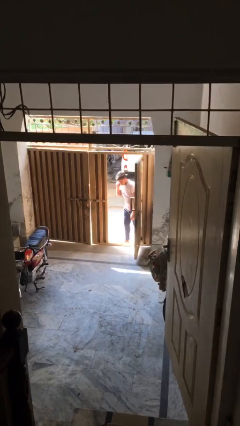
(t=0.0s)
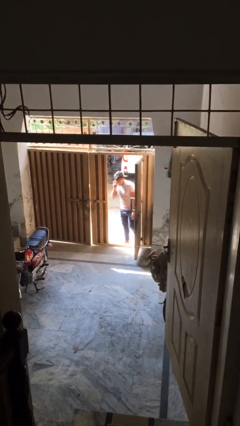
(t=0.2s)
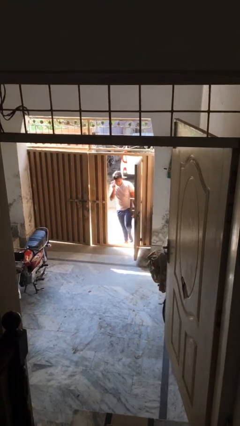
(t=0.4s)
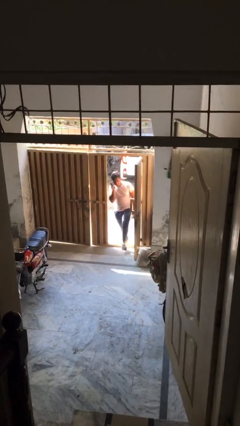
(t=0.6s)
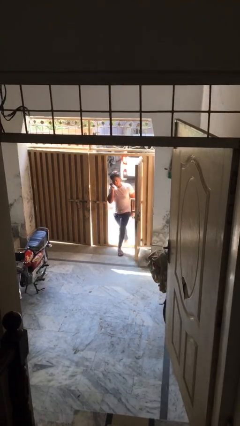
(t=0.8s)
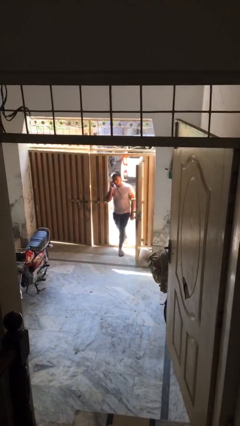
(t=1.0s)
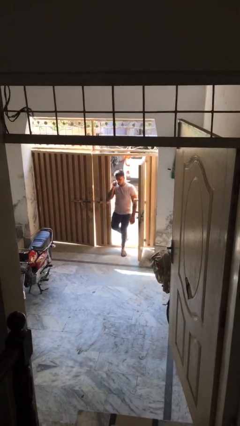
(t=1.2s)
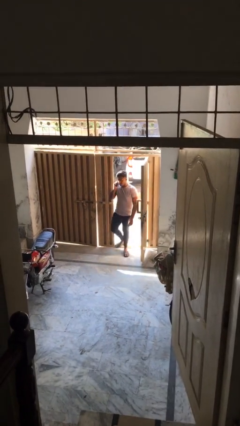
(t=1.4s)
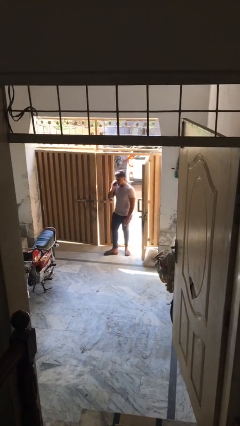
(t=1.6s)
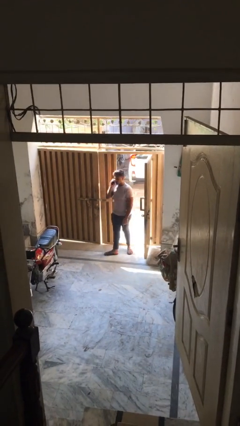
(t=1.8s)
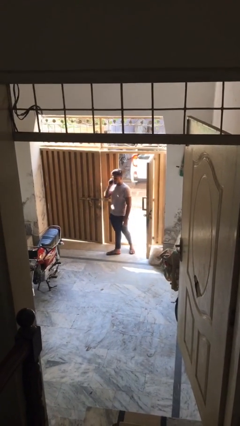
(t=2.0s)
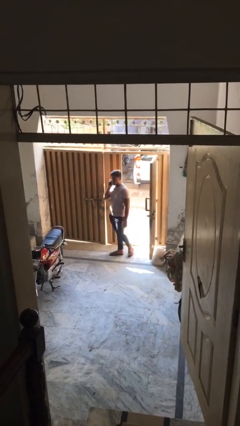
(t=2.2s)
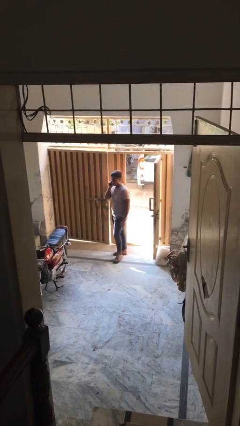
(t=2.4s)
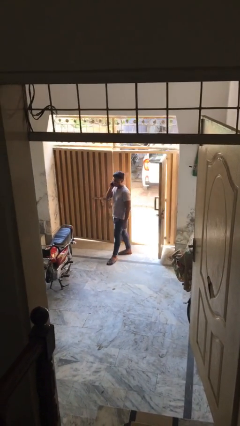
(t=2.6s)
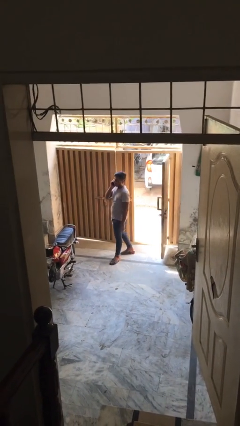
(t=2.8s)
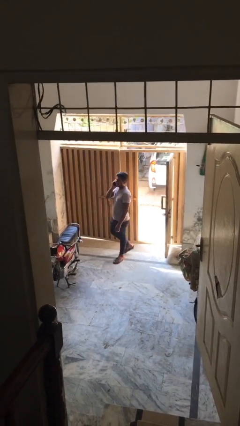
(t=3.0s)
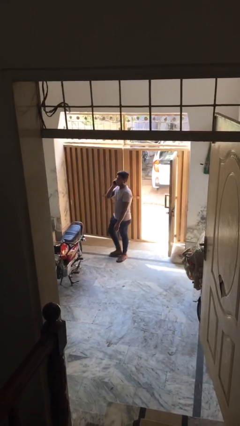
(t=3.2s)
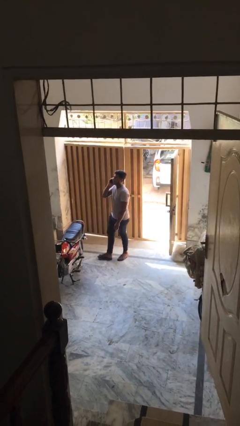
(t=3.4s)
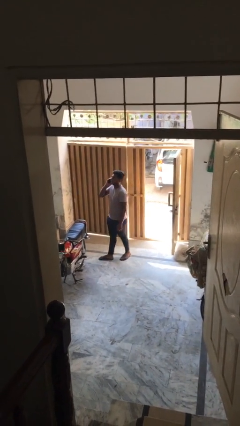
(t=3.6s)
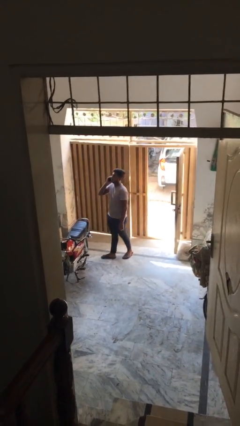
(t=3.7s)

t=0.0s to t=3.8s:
person enters scene through structure

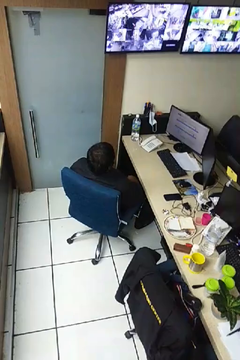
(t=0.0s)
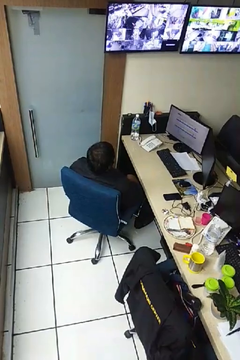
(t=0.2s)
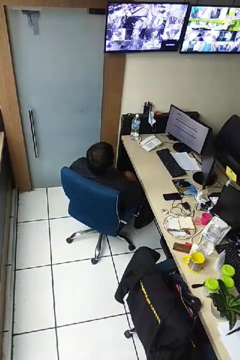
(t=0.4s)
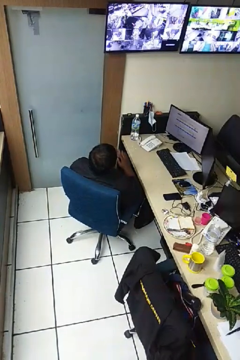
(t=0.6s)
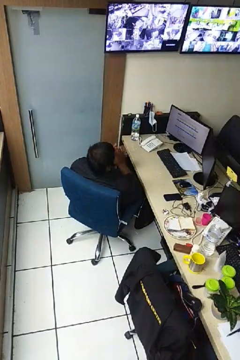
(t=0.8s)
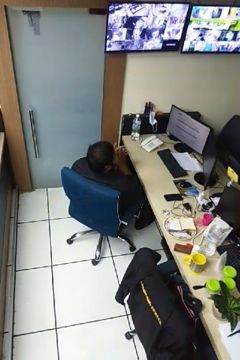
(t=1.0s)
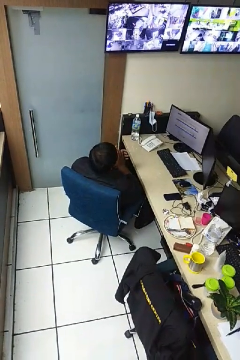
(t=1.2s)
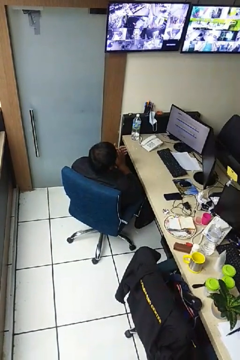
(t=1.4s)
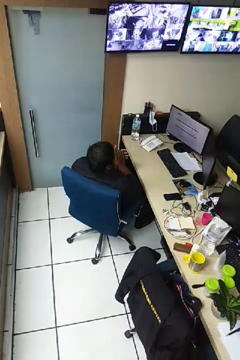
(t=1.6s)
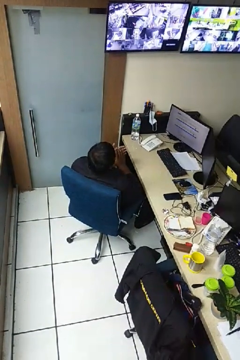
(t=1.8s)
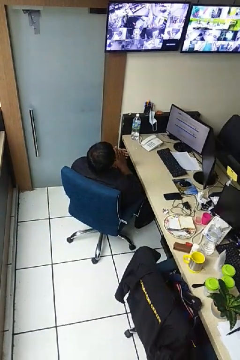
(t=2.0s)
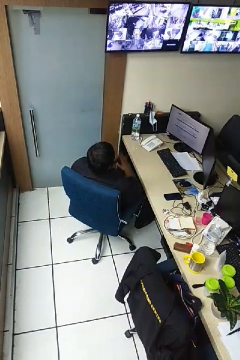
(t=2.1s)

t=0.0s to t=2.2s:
person claps hands

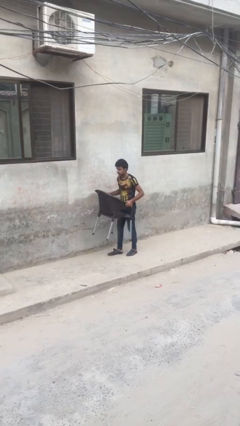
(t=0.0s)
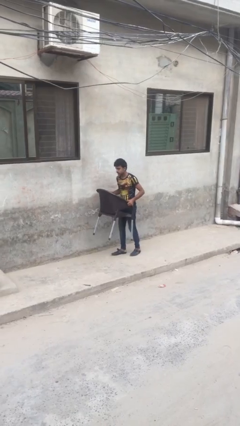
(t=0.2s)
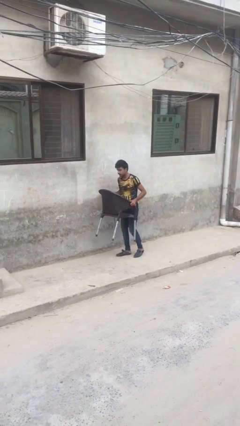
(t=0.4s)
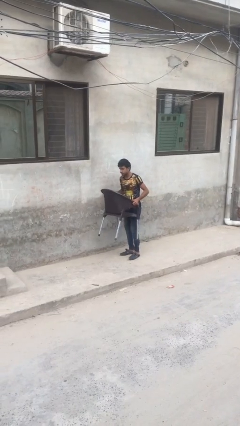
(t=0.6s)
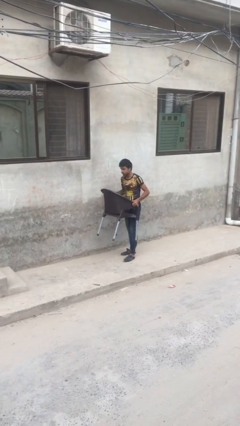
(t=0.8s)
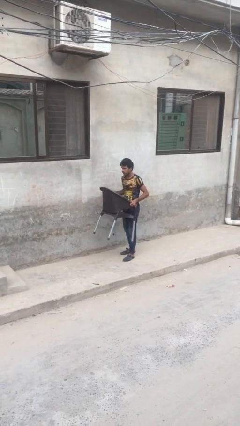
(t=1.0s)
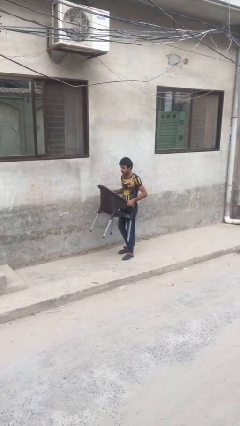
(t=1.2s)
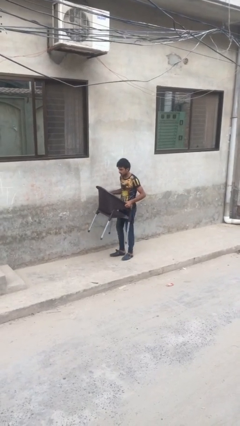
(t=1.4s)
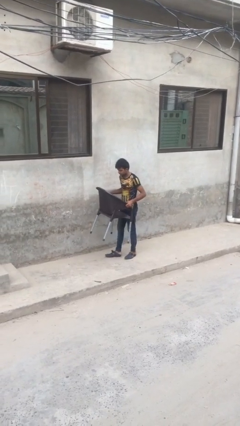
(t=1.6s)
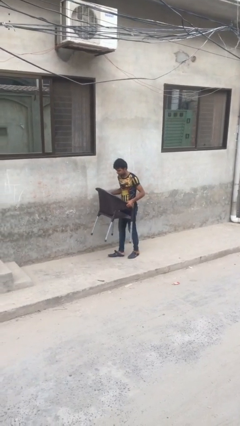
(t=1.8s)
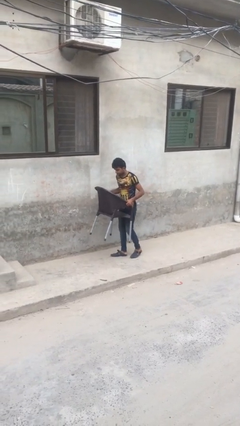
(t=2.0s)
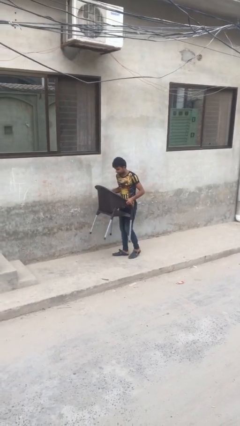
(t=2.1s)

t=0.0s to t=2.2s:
person carries heavy object

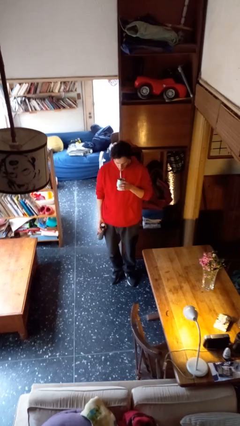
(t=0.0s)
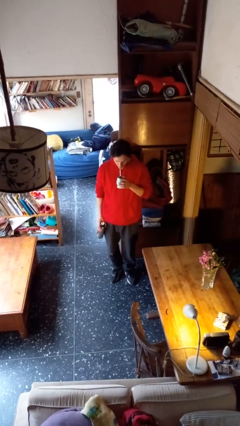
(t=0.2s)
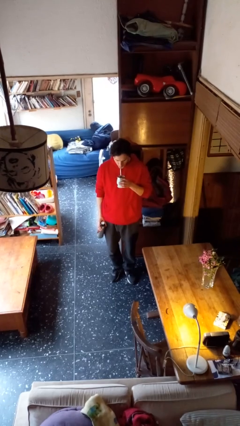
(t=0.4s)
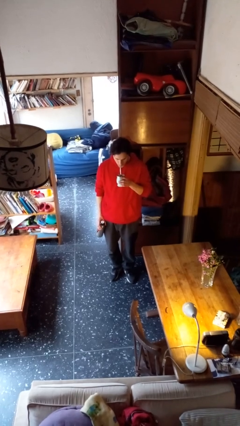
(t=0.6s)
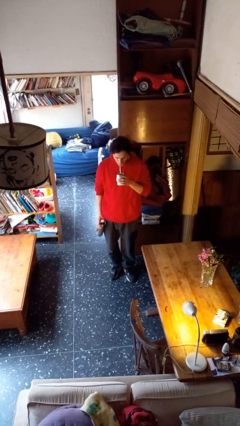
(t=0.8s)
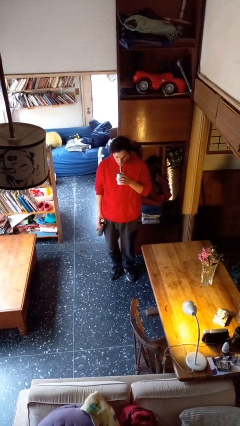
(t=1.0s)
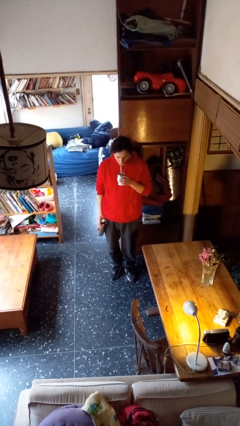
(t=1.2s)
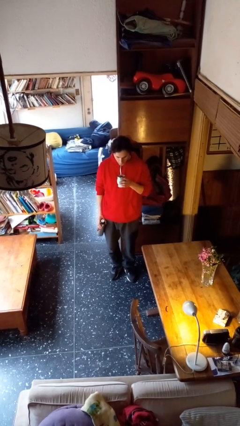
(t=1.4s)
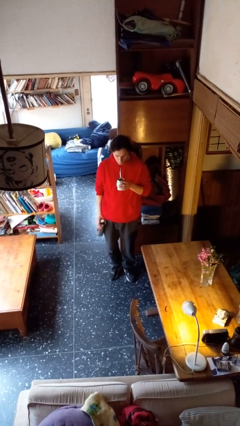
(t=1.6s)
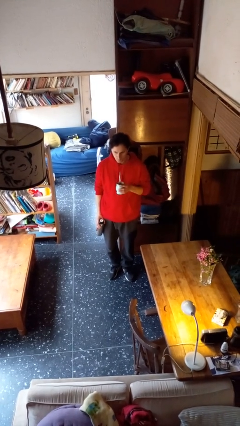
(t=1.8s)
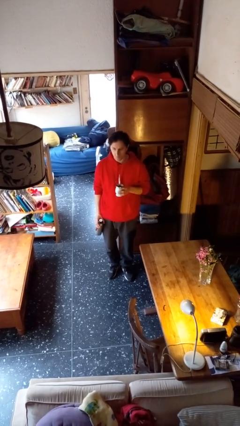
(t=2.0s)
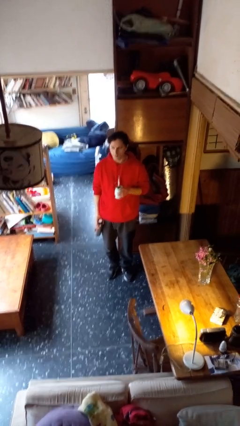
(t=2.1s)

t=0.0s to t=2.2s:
person drinks from straw

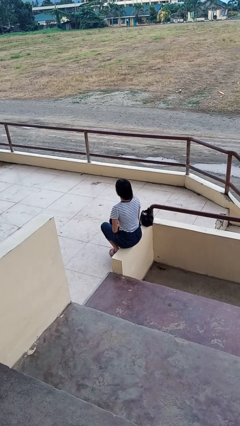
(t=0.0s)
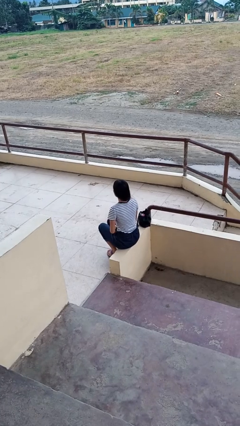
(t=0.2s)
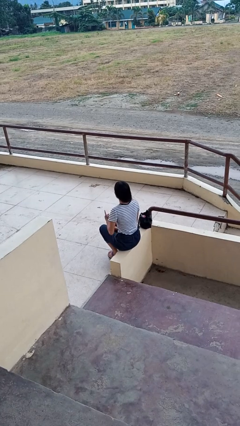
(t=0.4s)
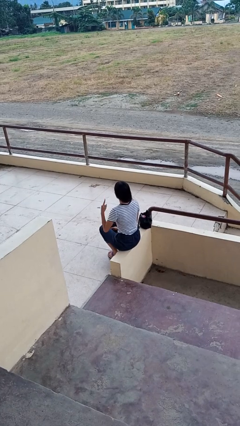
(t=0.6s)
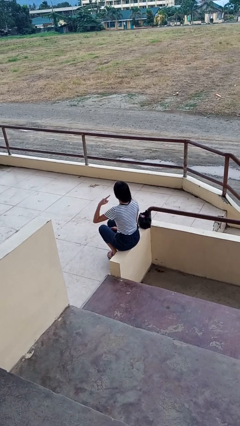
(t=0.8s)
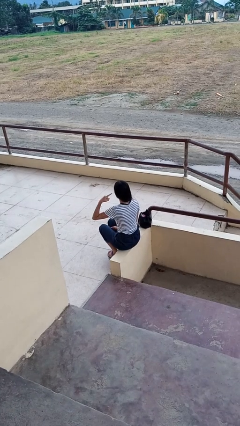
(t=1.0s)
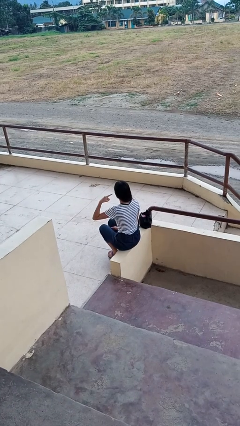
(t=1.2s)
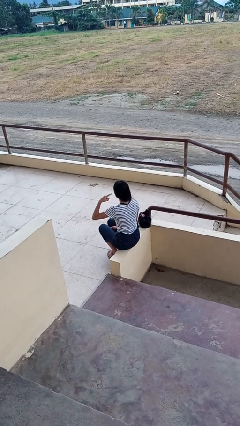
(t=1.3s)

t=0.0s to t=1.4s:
person gestures listen closely

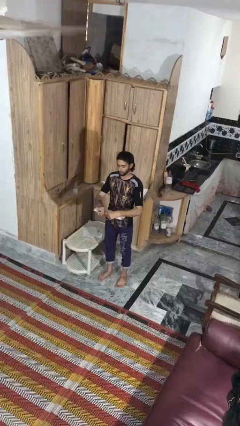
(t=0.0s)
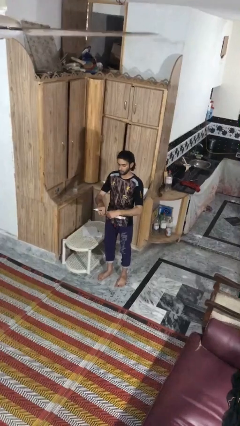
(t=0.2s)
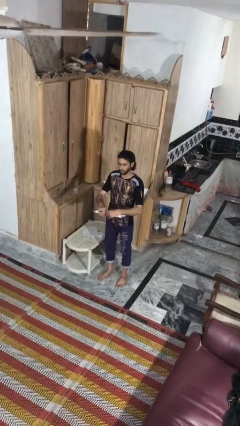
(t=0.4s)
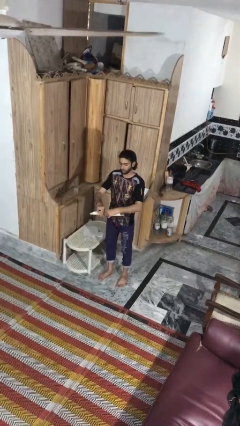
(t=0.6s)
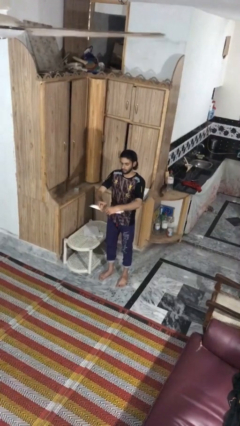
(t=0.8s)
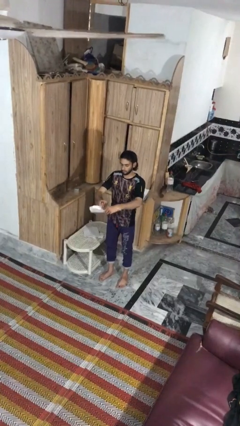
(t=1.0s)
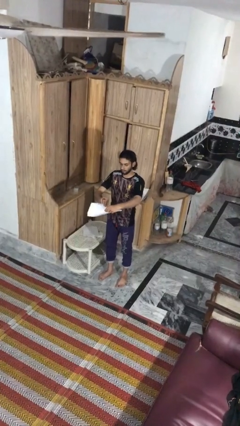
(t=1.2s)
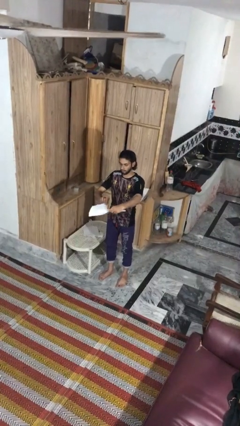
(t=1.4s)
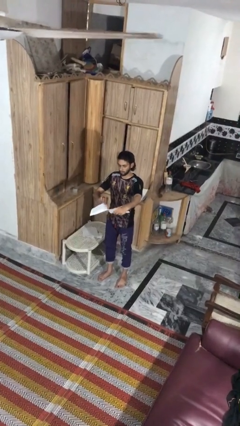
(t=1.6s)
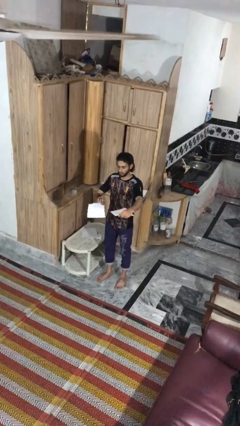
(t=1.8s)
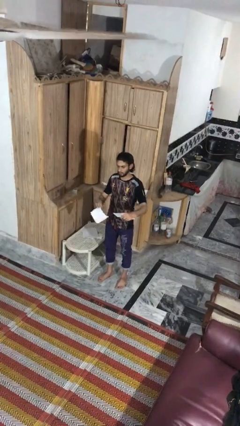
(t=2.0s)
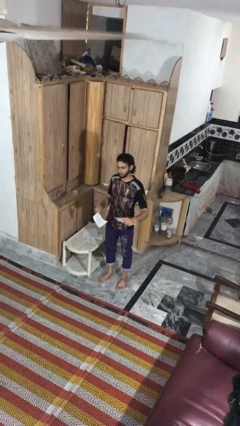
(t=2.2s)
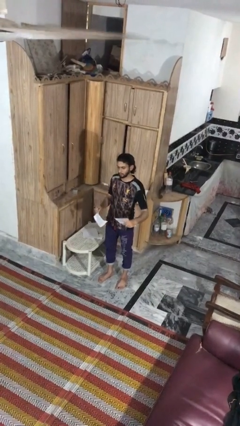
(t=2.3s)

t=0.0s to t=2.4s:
person tears paper

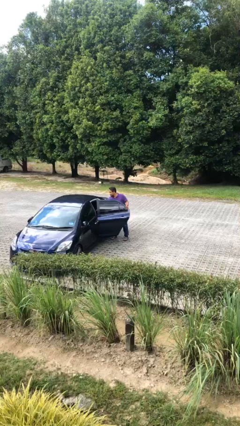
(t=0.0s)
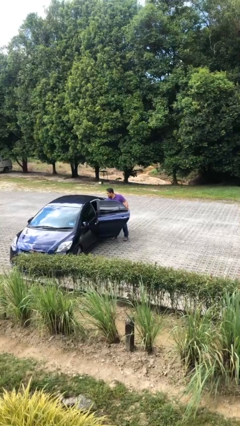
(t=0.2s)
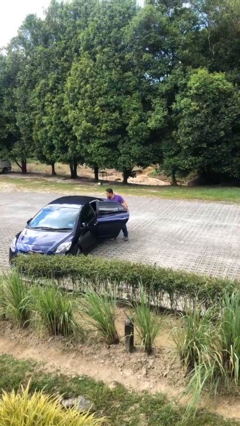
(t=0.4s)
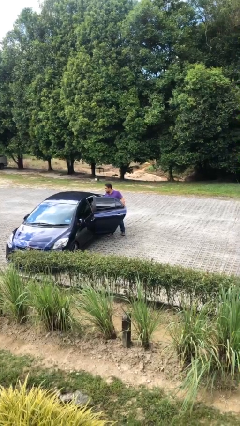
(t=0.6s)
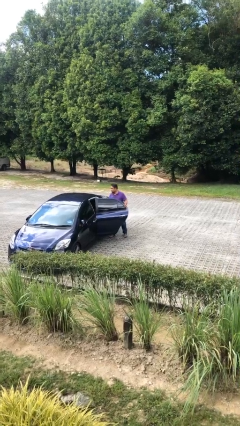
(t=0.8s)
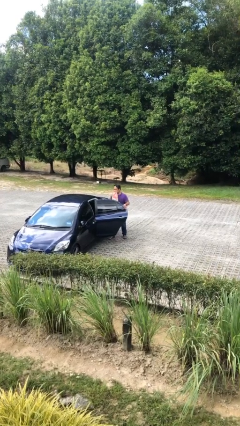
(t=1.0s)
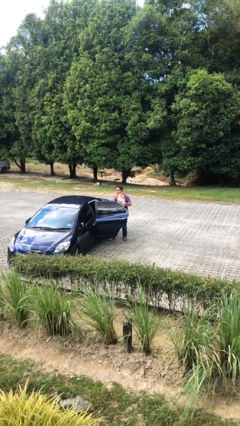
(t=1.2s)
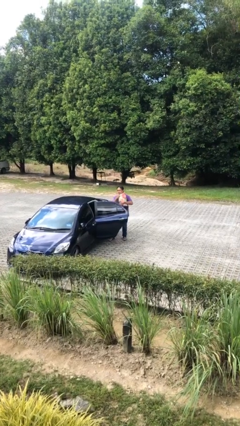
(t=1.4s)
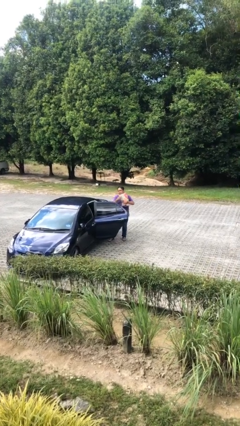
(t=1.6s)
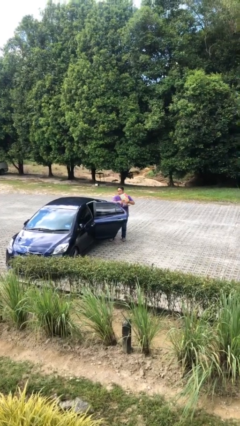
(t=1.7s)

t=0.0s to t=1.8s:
person unloads car

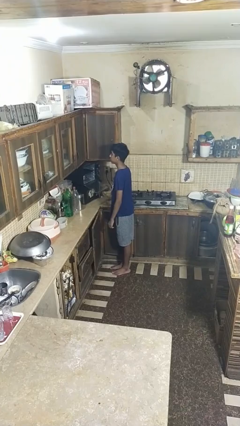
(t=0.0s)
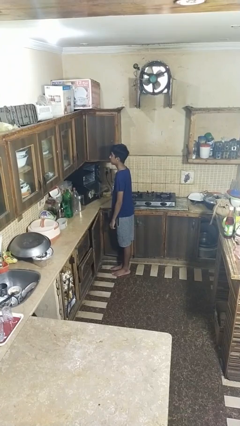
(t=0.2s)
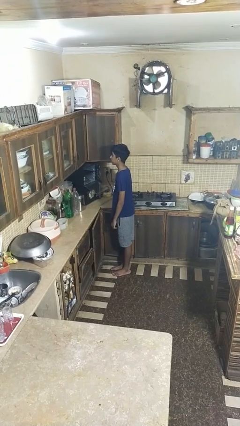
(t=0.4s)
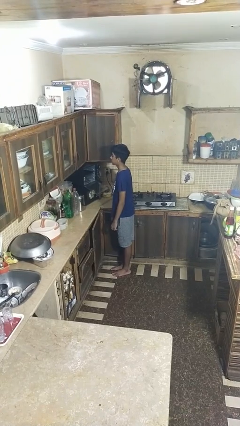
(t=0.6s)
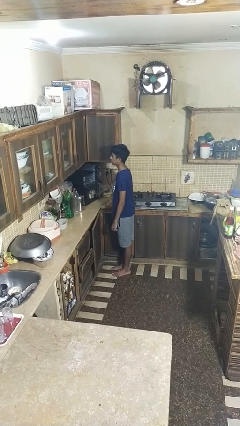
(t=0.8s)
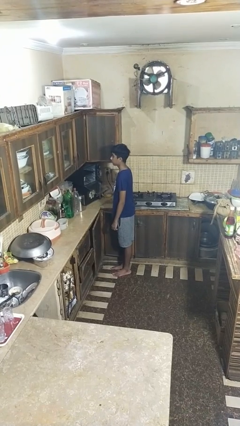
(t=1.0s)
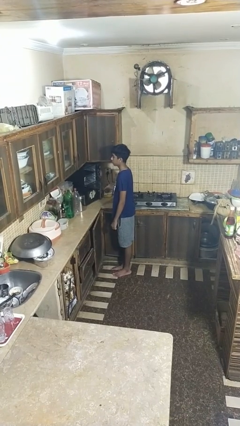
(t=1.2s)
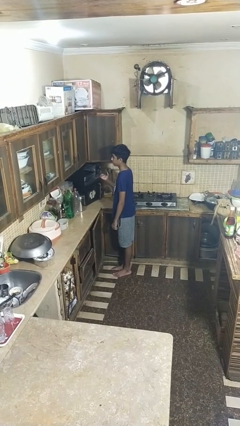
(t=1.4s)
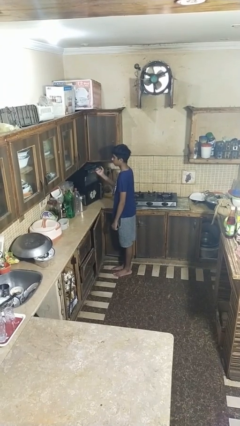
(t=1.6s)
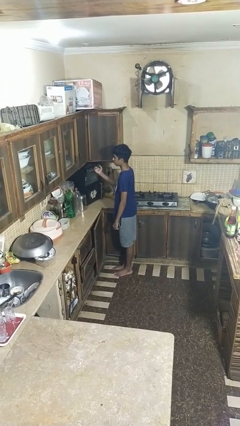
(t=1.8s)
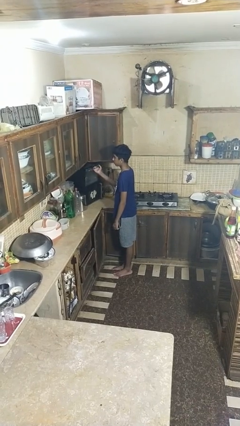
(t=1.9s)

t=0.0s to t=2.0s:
person closes oven door
